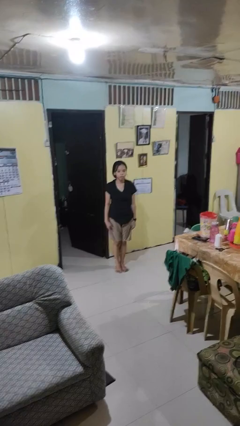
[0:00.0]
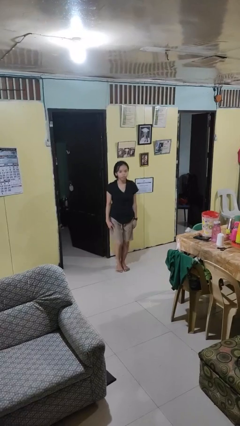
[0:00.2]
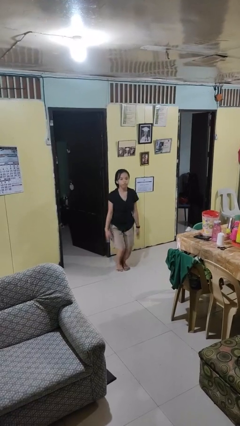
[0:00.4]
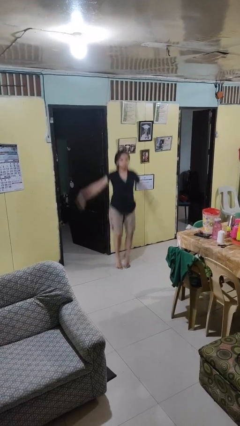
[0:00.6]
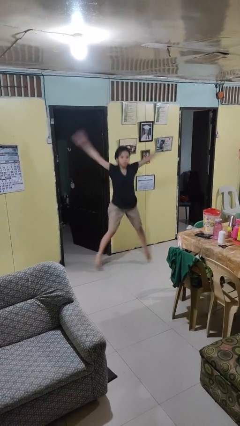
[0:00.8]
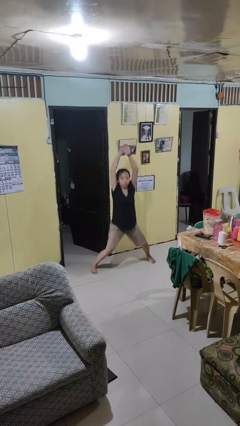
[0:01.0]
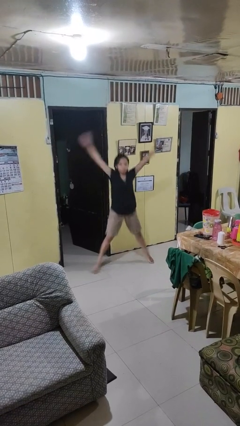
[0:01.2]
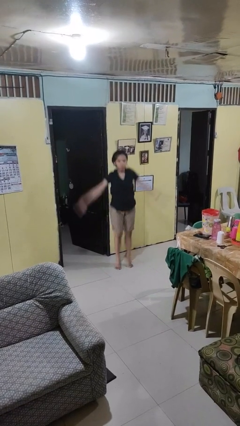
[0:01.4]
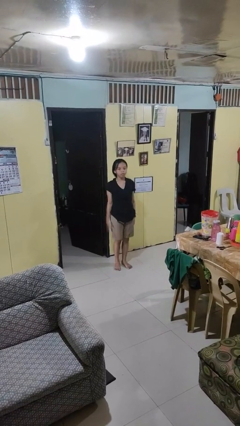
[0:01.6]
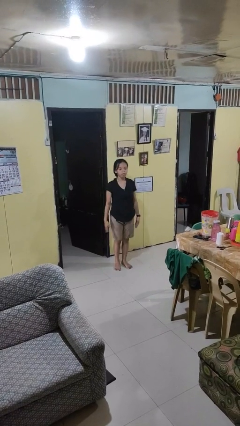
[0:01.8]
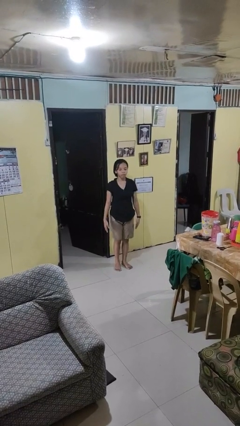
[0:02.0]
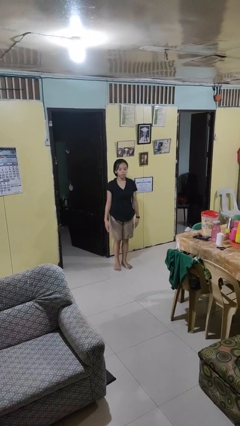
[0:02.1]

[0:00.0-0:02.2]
person exercises with jumping jacks

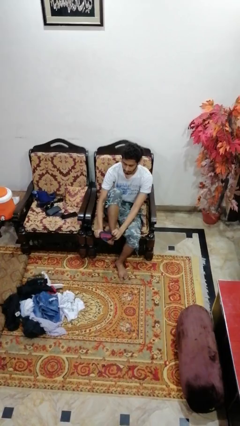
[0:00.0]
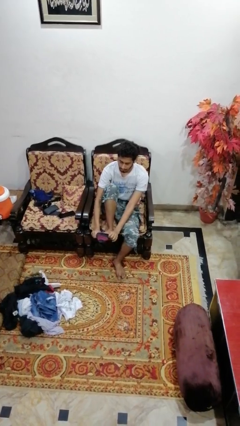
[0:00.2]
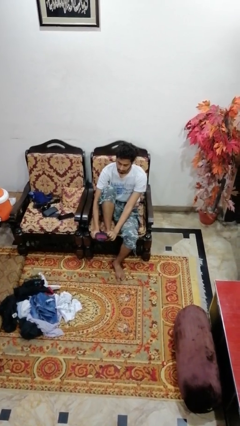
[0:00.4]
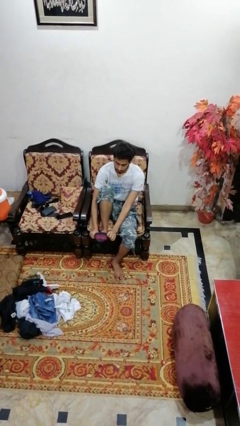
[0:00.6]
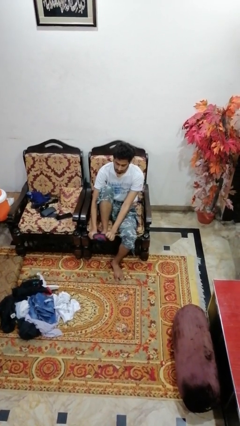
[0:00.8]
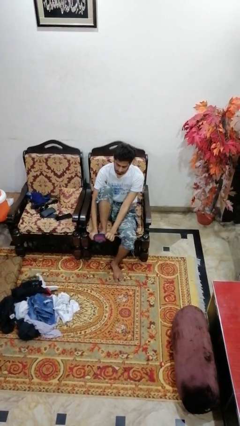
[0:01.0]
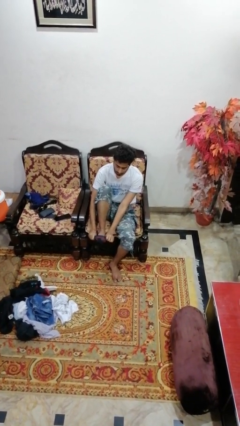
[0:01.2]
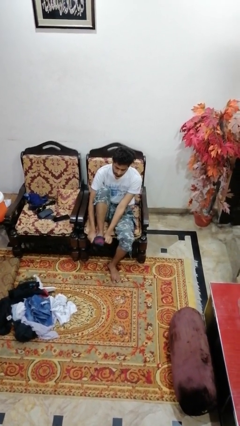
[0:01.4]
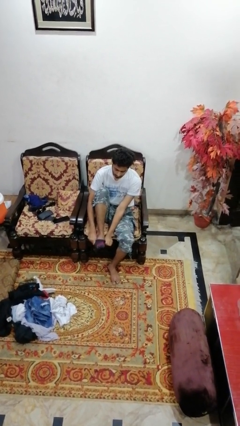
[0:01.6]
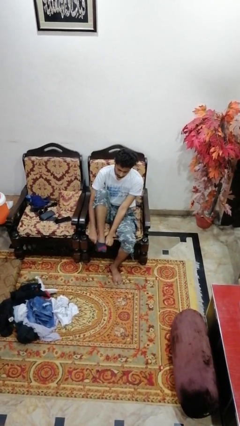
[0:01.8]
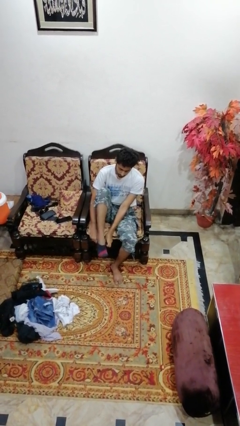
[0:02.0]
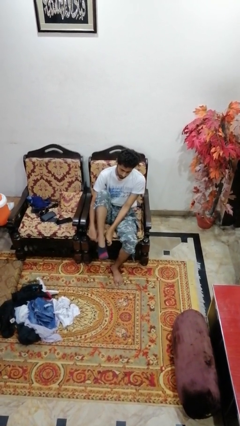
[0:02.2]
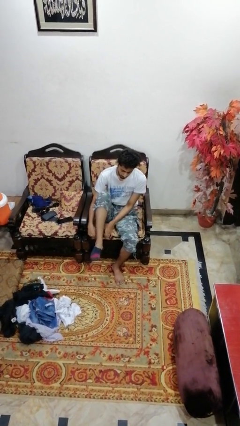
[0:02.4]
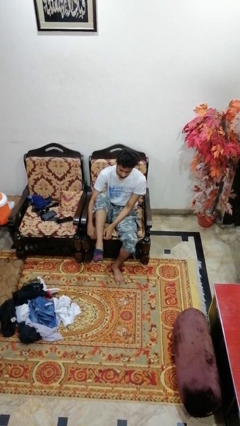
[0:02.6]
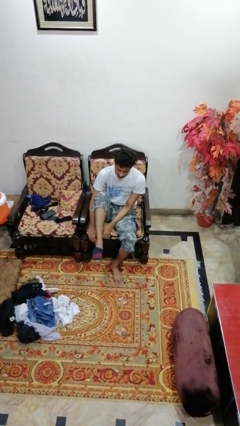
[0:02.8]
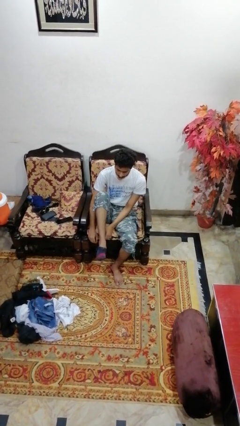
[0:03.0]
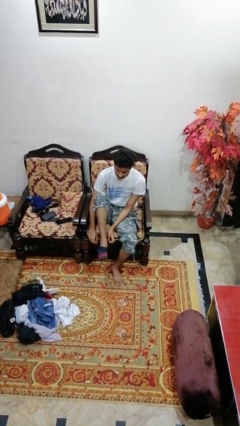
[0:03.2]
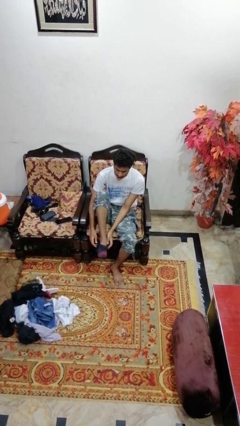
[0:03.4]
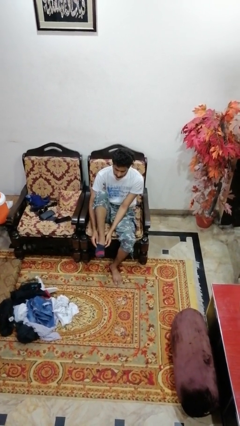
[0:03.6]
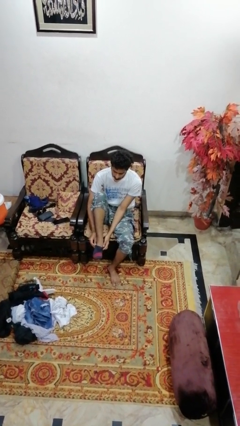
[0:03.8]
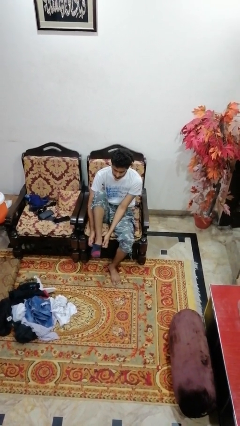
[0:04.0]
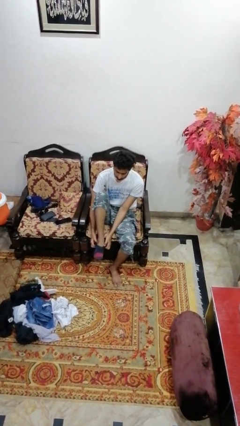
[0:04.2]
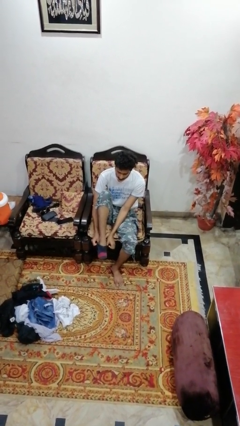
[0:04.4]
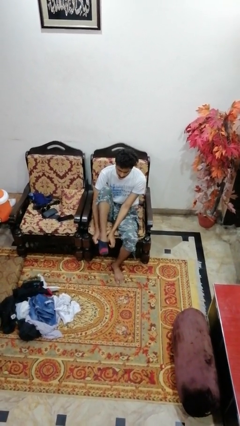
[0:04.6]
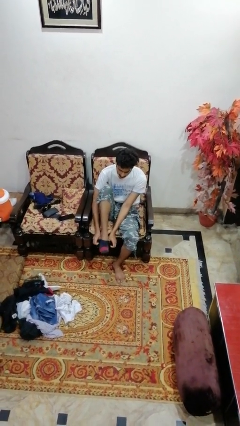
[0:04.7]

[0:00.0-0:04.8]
person puts on socks

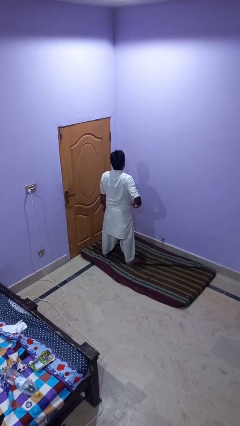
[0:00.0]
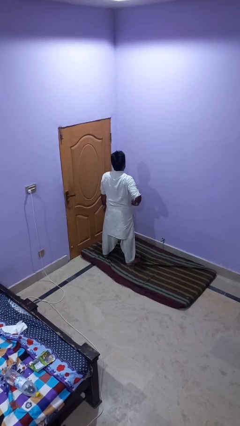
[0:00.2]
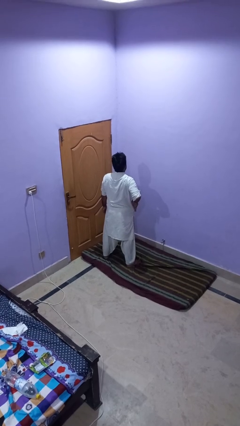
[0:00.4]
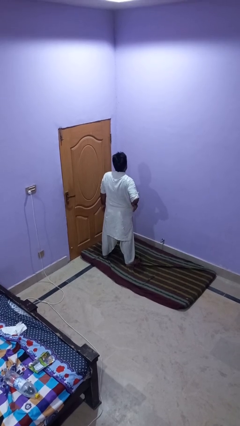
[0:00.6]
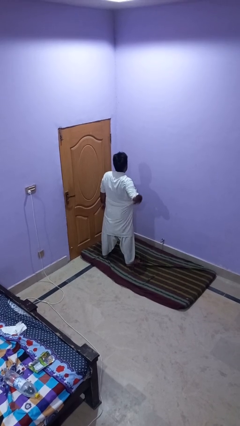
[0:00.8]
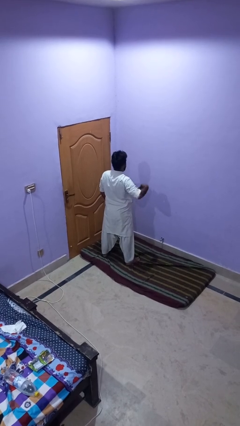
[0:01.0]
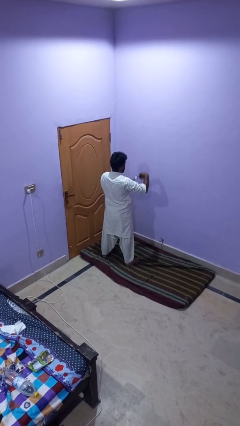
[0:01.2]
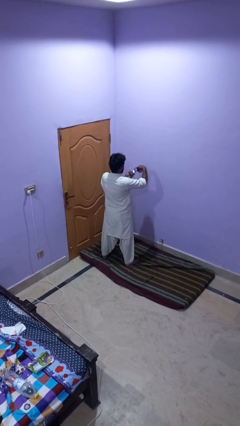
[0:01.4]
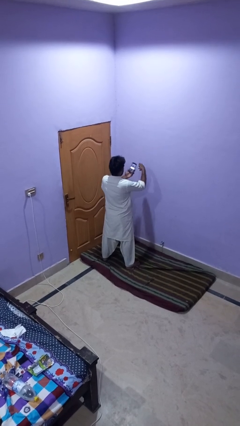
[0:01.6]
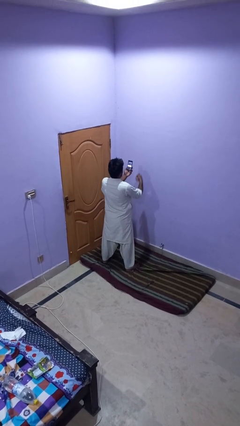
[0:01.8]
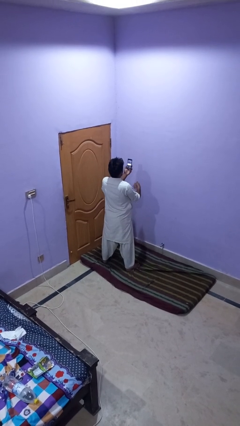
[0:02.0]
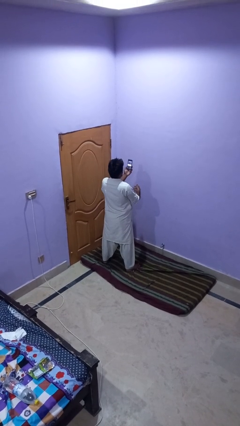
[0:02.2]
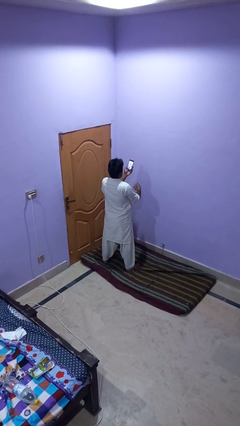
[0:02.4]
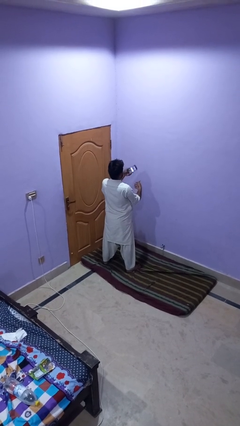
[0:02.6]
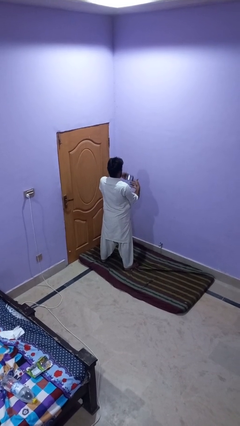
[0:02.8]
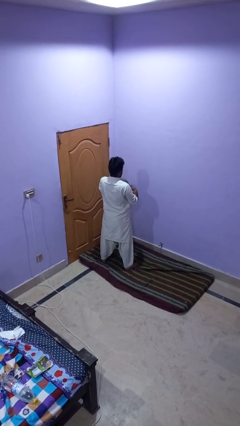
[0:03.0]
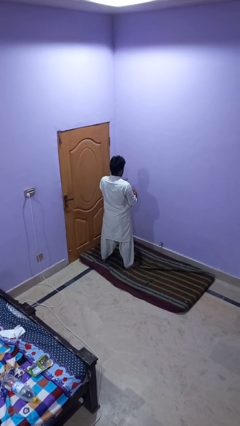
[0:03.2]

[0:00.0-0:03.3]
person takes phone from pocket

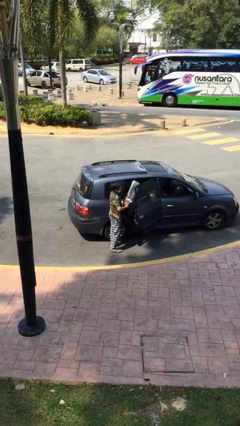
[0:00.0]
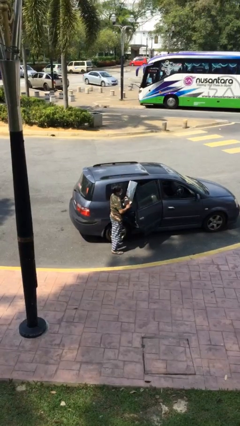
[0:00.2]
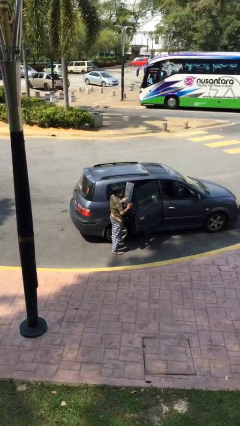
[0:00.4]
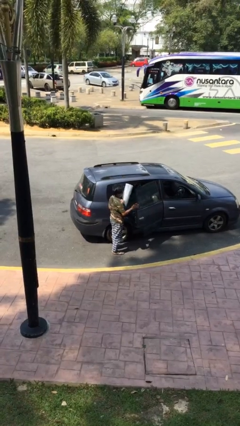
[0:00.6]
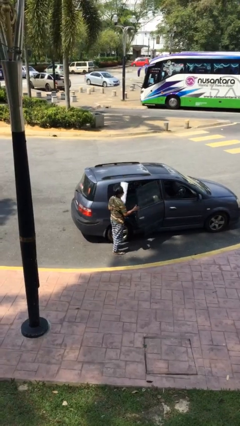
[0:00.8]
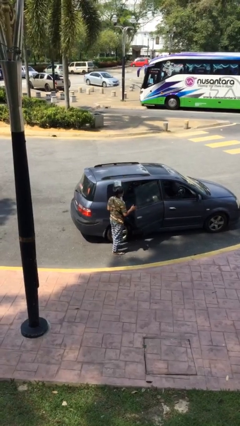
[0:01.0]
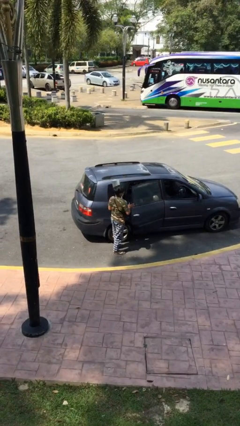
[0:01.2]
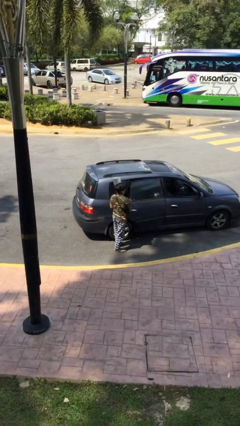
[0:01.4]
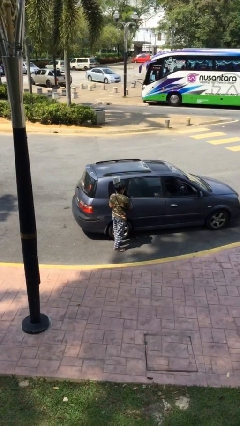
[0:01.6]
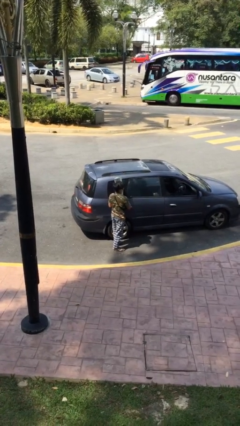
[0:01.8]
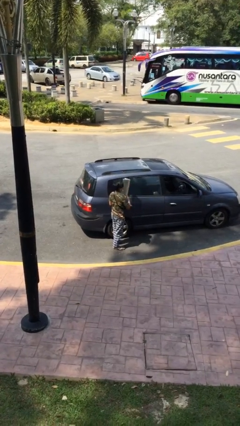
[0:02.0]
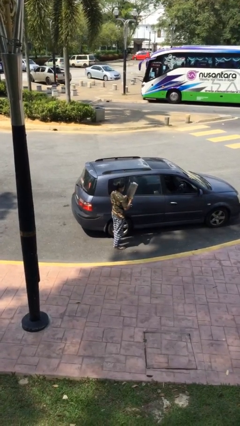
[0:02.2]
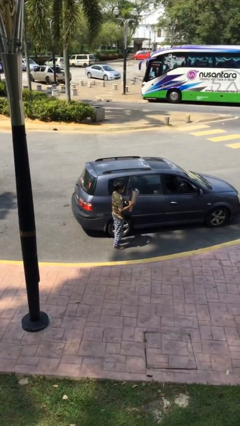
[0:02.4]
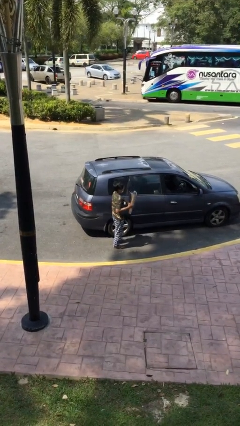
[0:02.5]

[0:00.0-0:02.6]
person closes car door

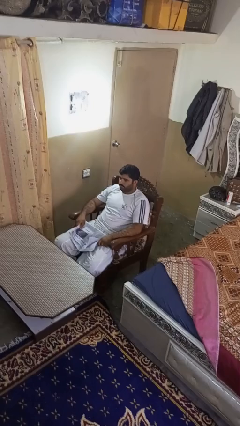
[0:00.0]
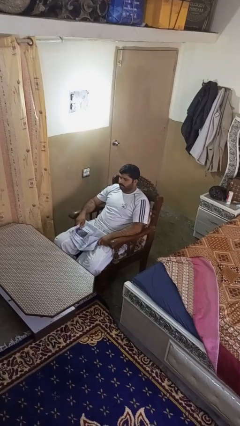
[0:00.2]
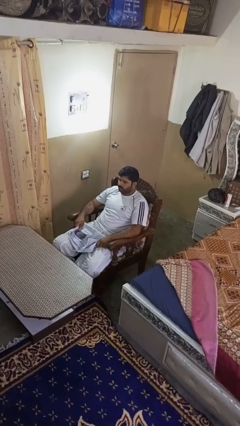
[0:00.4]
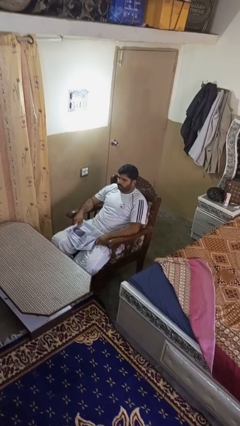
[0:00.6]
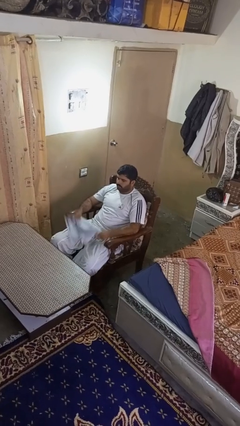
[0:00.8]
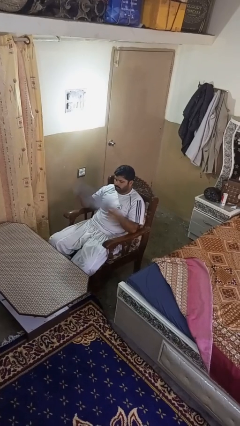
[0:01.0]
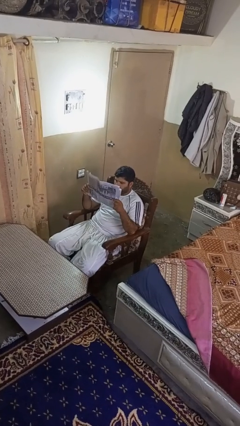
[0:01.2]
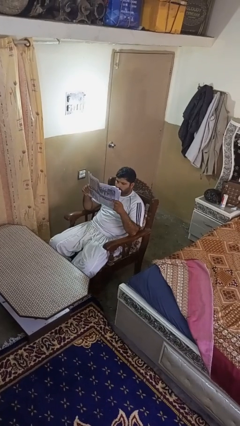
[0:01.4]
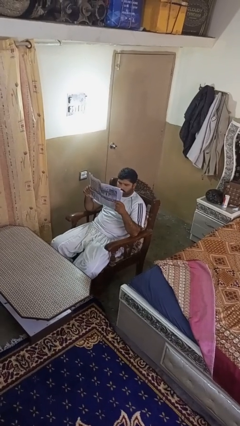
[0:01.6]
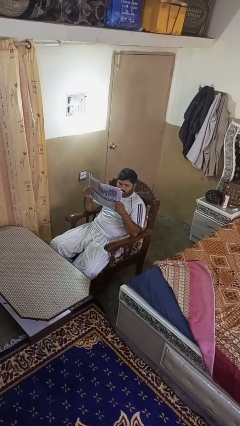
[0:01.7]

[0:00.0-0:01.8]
person reads newspaper

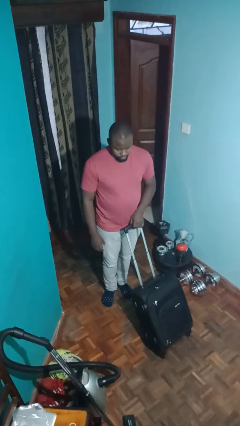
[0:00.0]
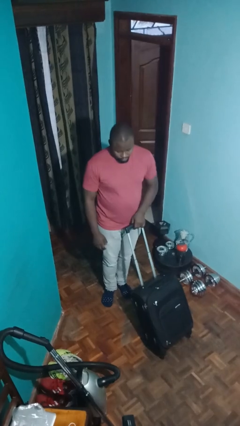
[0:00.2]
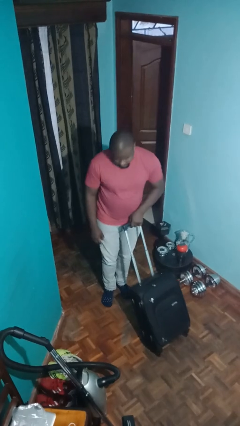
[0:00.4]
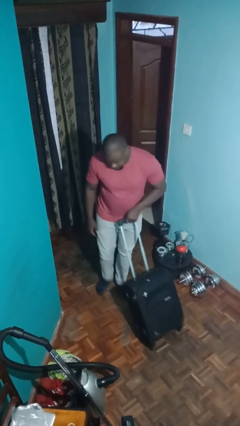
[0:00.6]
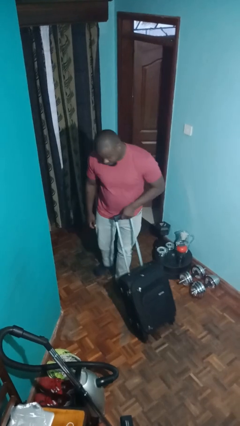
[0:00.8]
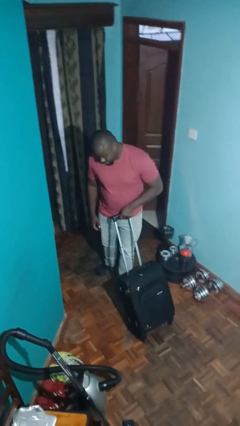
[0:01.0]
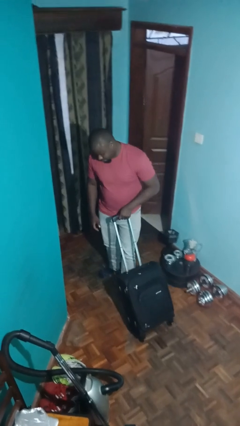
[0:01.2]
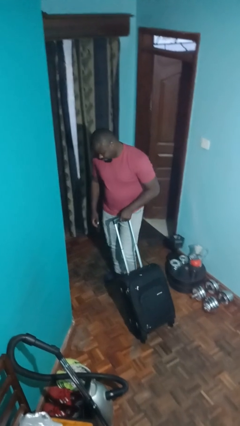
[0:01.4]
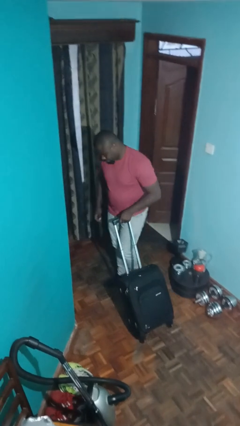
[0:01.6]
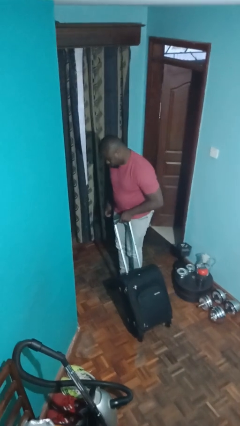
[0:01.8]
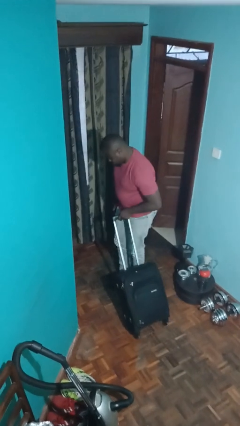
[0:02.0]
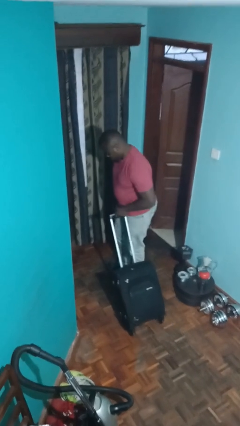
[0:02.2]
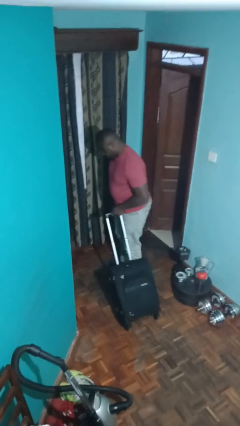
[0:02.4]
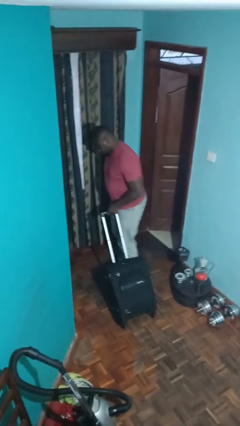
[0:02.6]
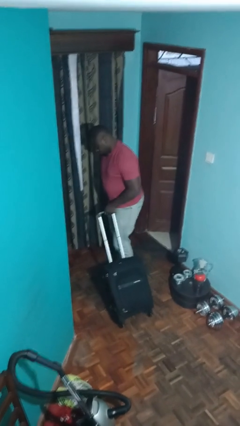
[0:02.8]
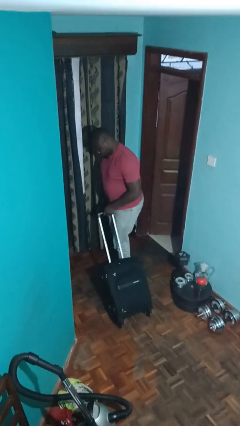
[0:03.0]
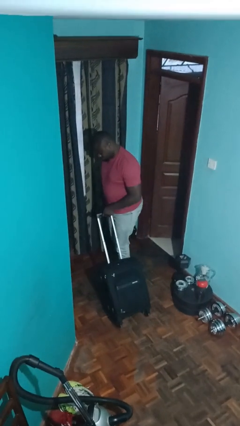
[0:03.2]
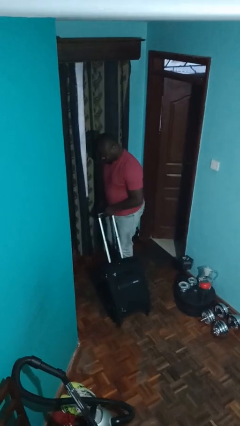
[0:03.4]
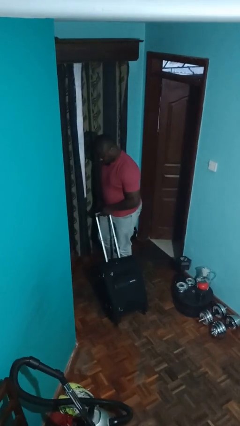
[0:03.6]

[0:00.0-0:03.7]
person pulls wheeled cart
